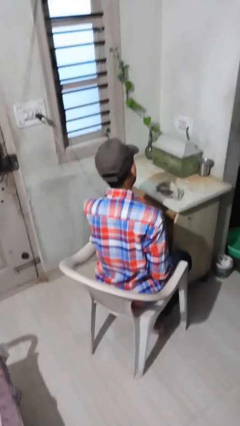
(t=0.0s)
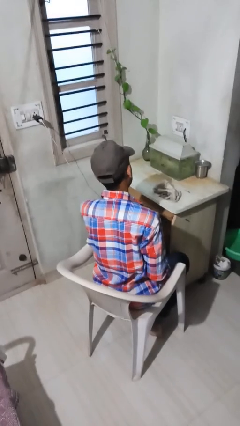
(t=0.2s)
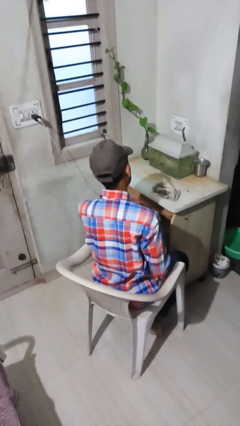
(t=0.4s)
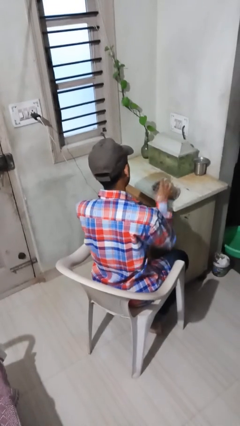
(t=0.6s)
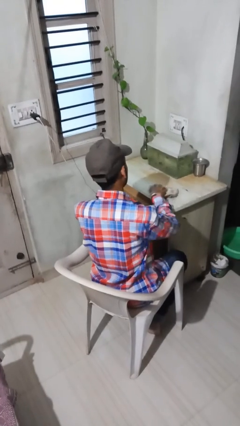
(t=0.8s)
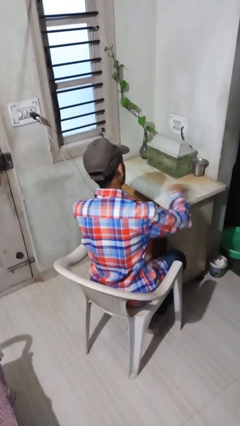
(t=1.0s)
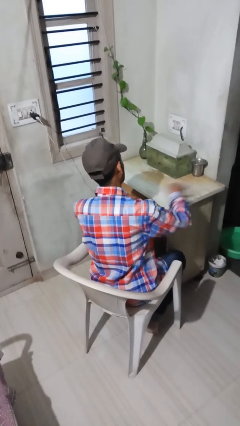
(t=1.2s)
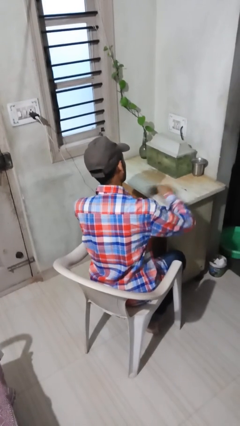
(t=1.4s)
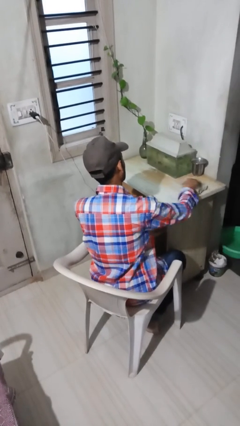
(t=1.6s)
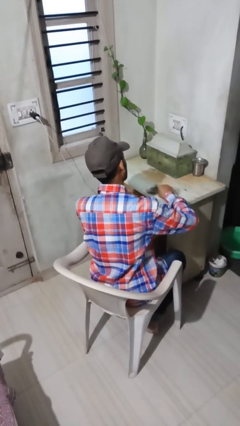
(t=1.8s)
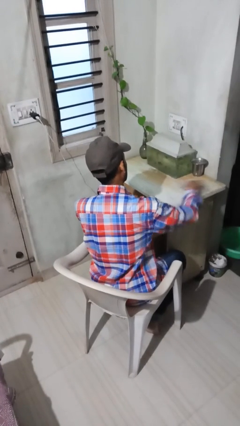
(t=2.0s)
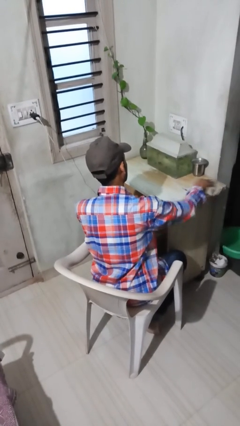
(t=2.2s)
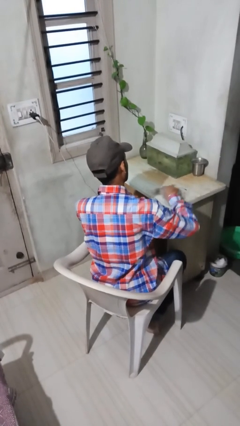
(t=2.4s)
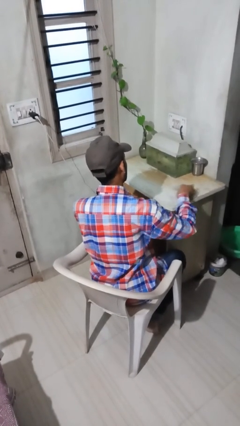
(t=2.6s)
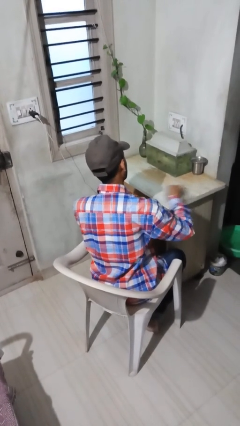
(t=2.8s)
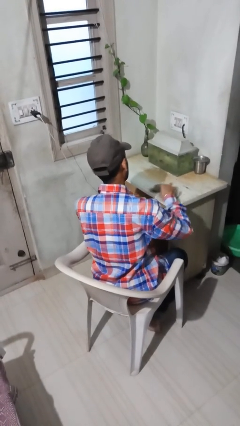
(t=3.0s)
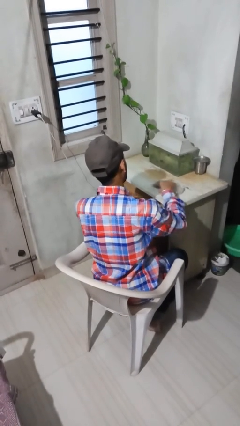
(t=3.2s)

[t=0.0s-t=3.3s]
person cleans table with rag

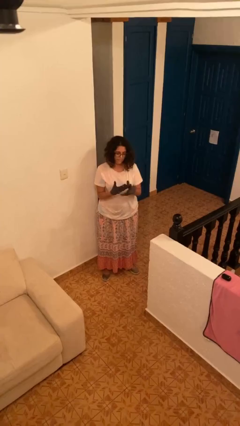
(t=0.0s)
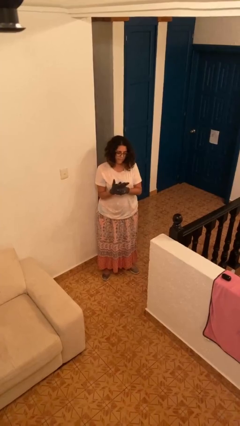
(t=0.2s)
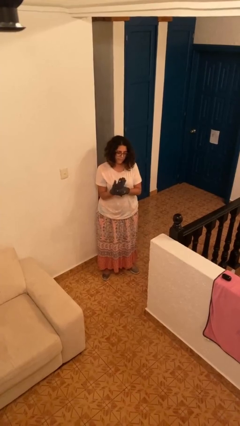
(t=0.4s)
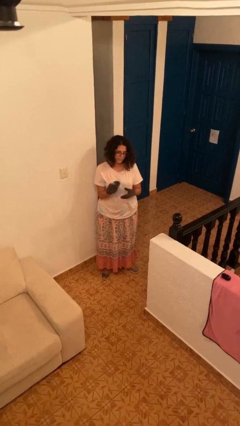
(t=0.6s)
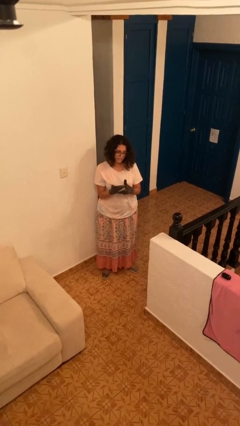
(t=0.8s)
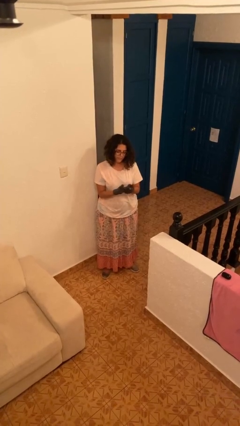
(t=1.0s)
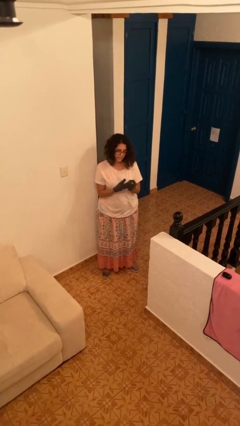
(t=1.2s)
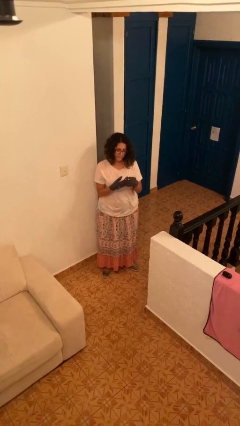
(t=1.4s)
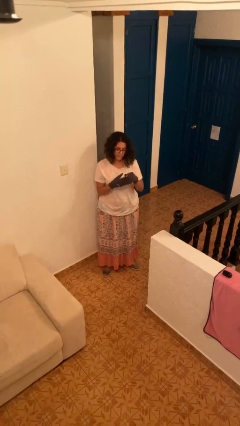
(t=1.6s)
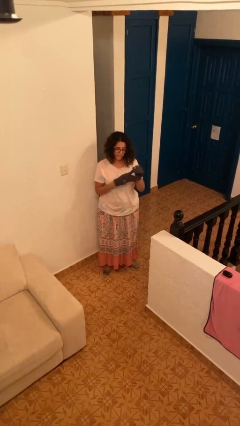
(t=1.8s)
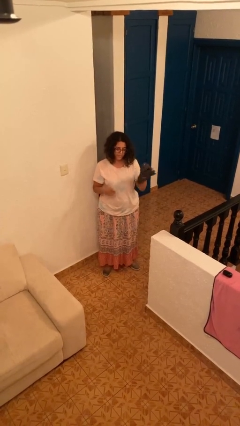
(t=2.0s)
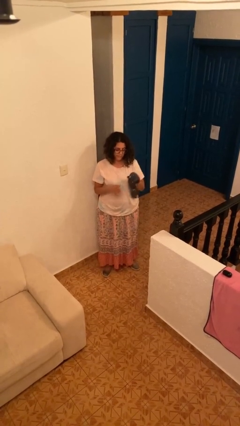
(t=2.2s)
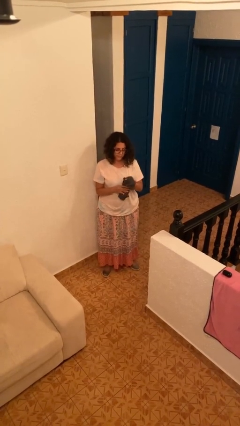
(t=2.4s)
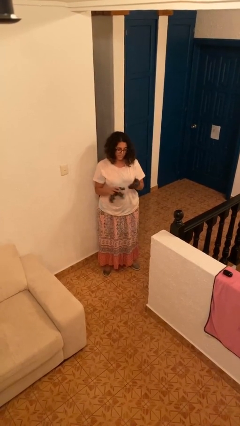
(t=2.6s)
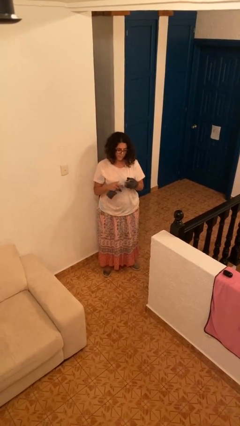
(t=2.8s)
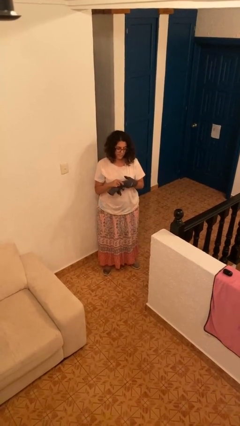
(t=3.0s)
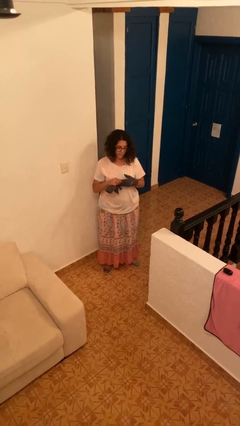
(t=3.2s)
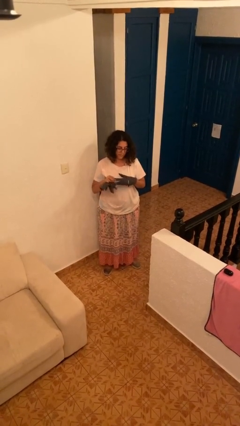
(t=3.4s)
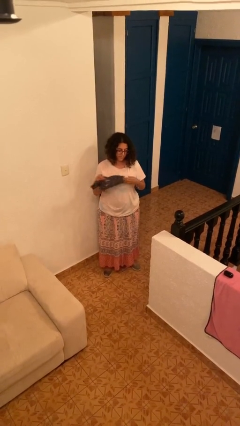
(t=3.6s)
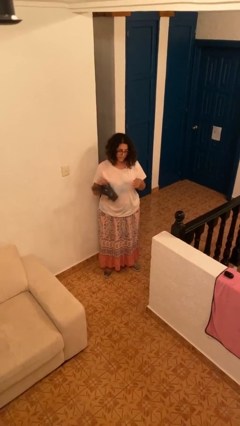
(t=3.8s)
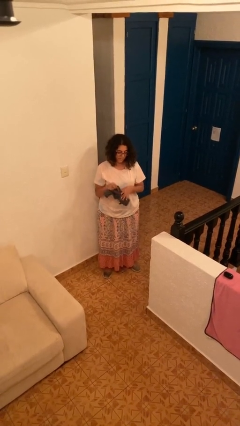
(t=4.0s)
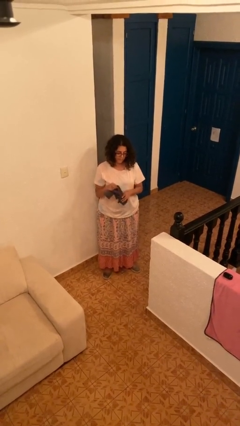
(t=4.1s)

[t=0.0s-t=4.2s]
person takes off gloves

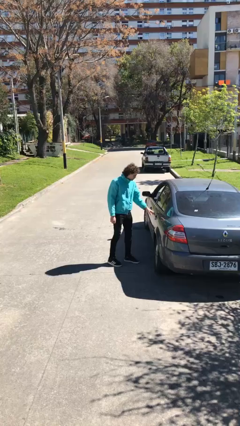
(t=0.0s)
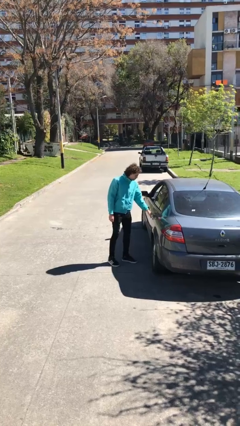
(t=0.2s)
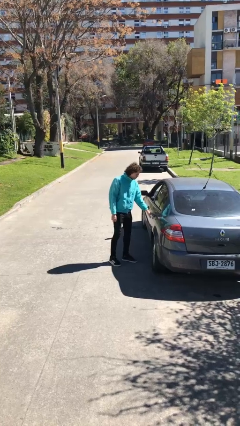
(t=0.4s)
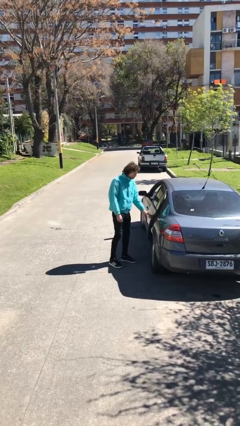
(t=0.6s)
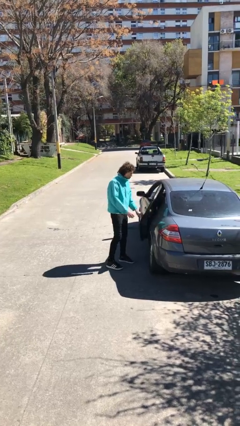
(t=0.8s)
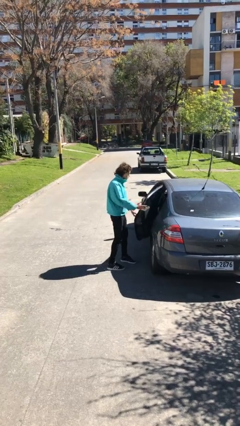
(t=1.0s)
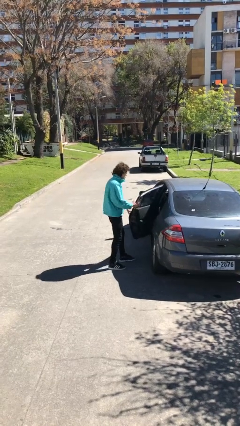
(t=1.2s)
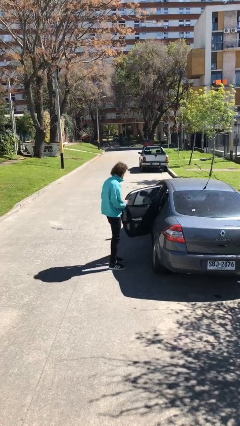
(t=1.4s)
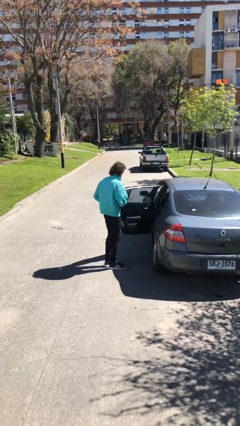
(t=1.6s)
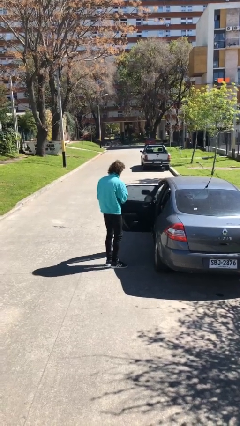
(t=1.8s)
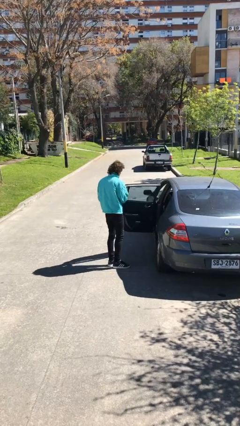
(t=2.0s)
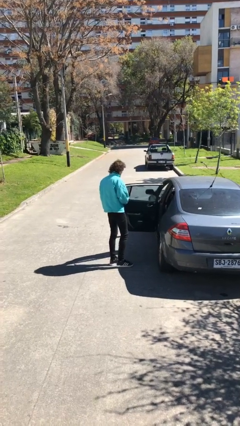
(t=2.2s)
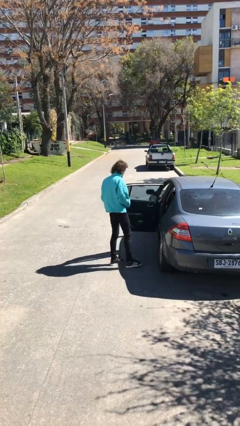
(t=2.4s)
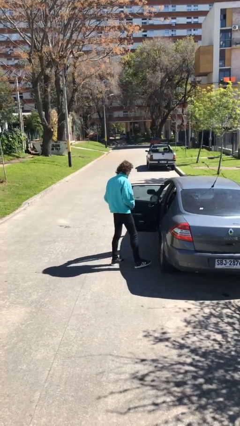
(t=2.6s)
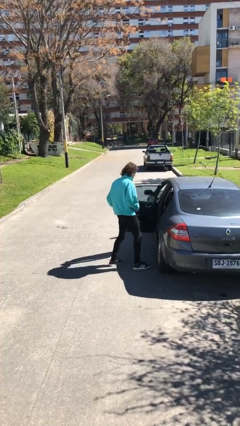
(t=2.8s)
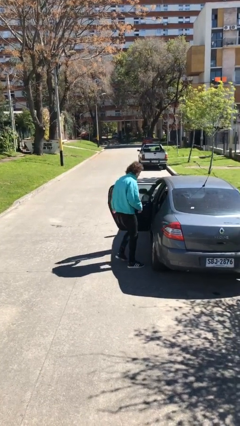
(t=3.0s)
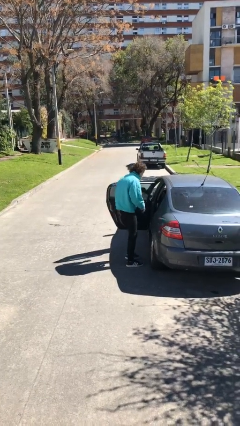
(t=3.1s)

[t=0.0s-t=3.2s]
person opens car door

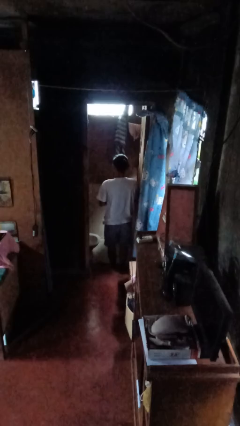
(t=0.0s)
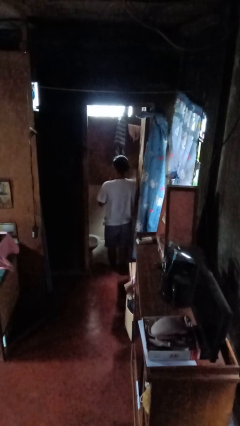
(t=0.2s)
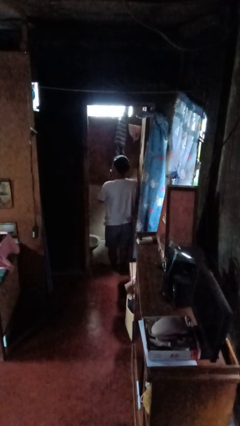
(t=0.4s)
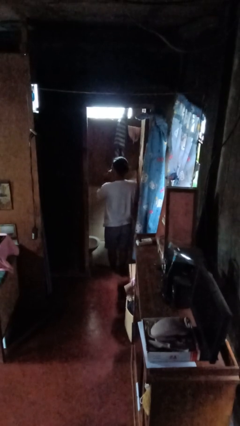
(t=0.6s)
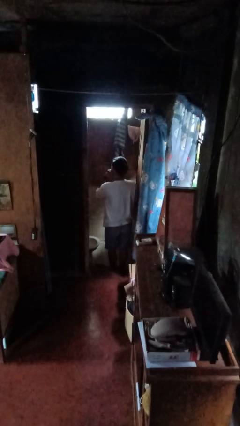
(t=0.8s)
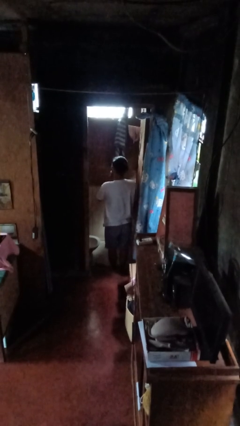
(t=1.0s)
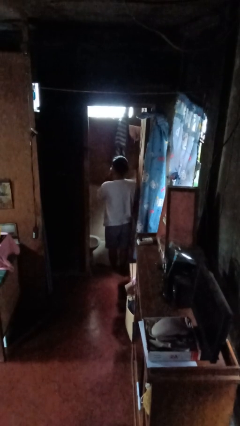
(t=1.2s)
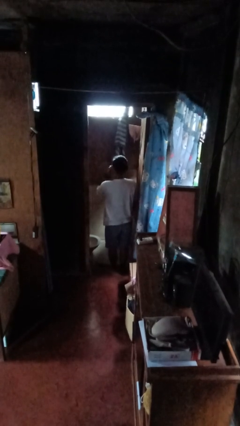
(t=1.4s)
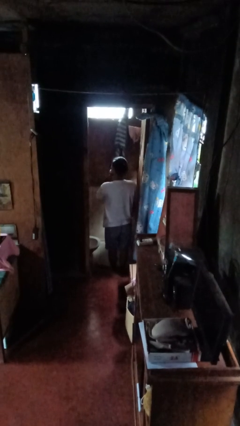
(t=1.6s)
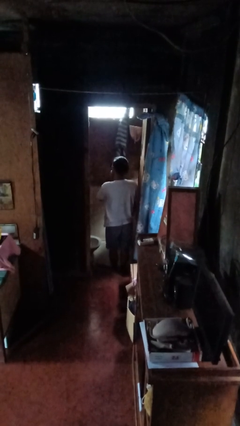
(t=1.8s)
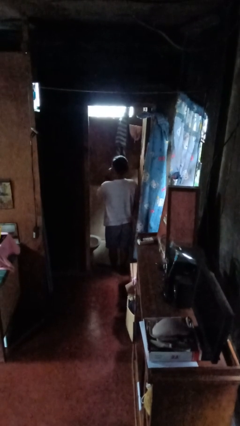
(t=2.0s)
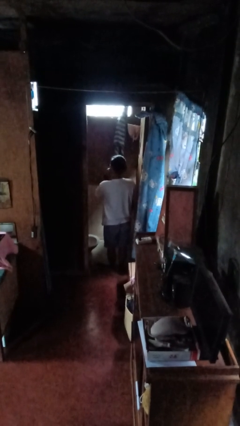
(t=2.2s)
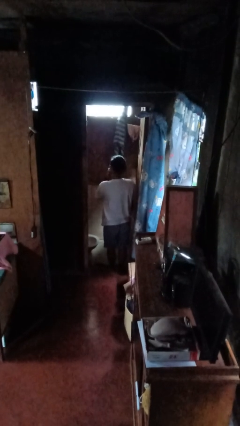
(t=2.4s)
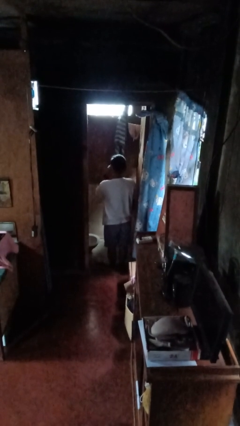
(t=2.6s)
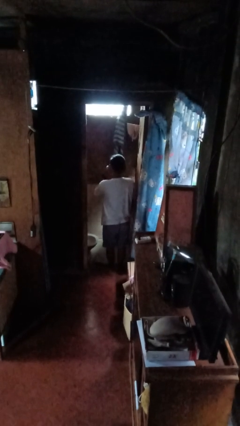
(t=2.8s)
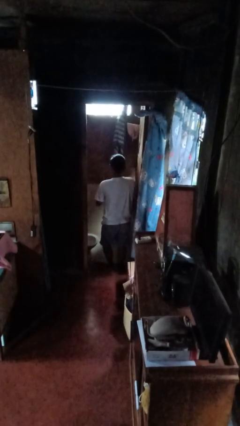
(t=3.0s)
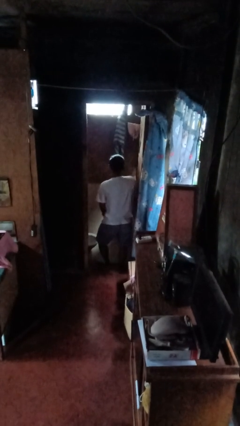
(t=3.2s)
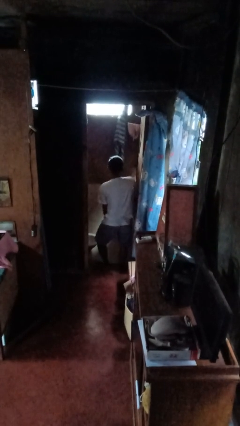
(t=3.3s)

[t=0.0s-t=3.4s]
person shaves face

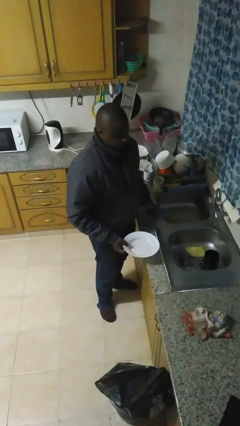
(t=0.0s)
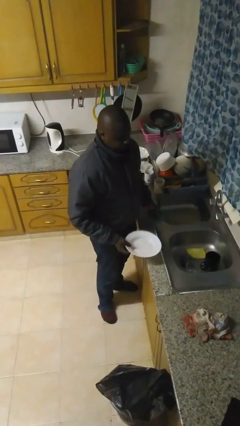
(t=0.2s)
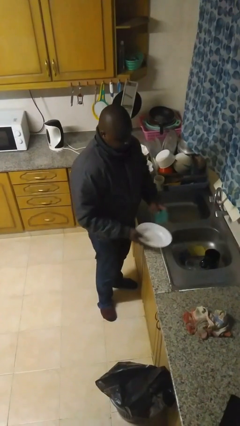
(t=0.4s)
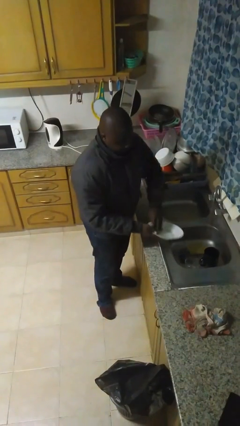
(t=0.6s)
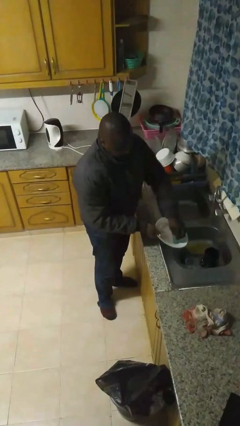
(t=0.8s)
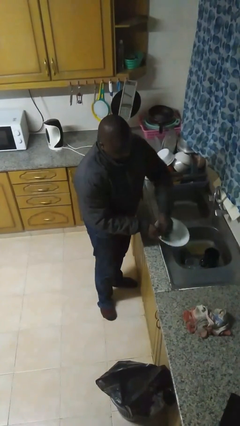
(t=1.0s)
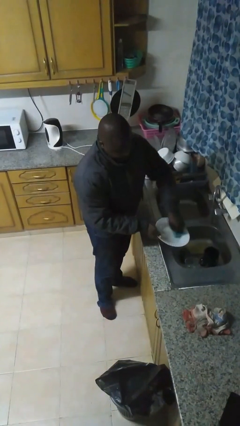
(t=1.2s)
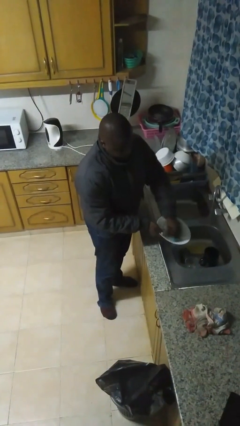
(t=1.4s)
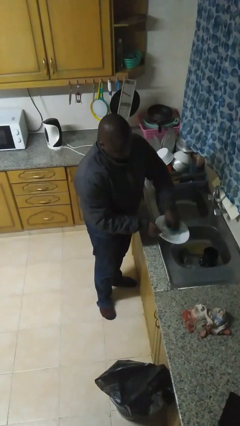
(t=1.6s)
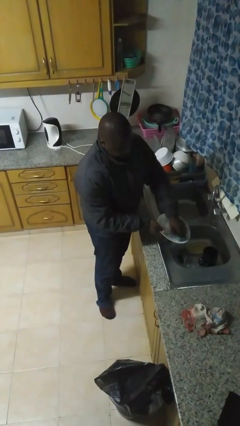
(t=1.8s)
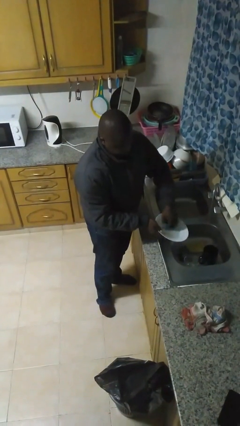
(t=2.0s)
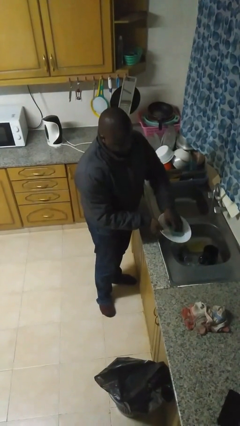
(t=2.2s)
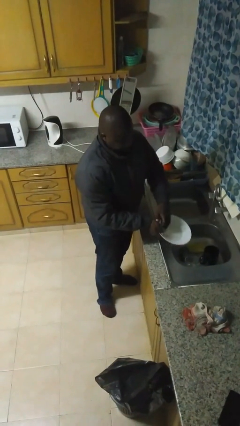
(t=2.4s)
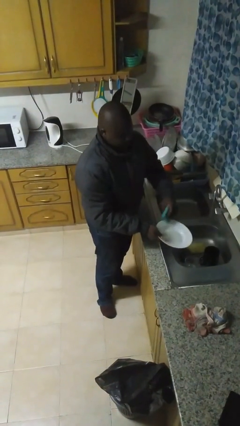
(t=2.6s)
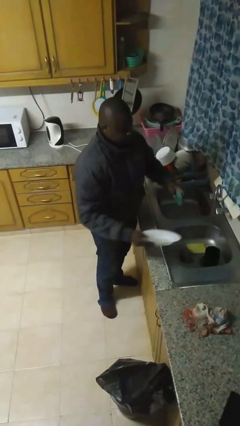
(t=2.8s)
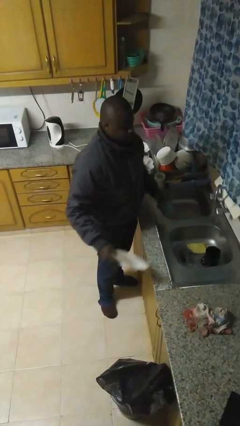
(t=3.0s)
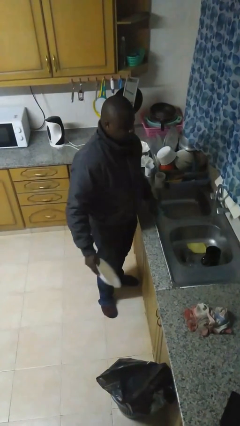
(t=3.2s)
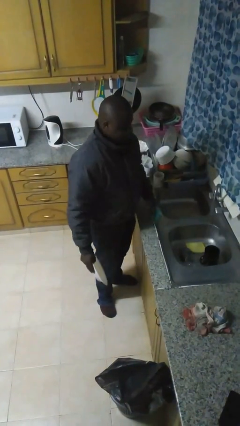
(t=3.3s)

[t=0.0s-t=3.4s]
person washes dish
